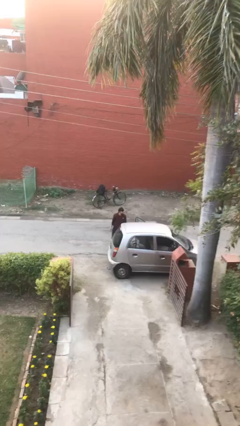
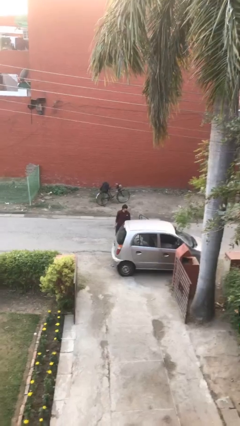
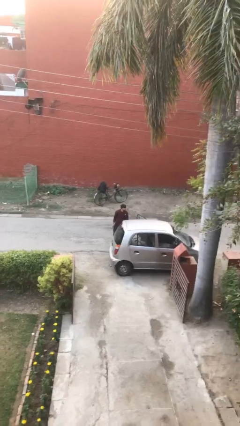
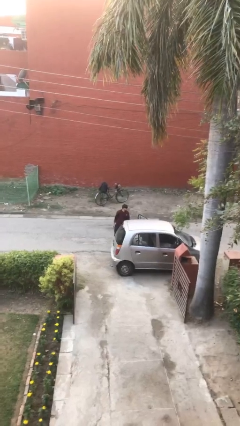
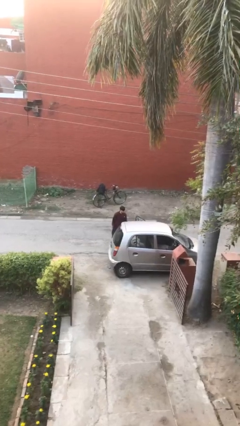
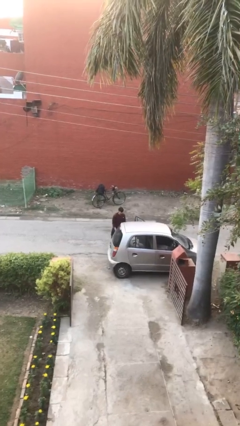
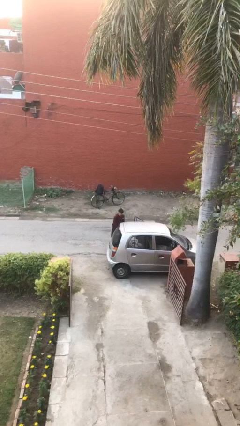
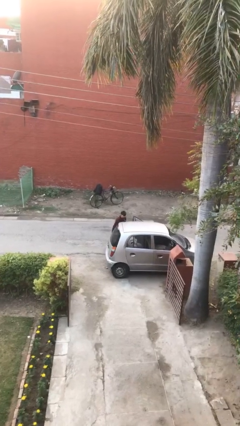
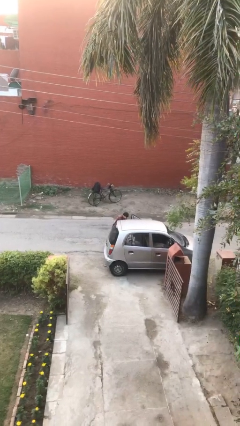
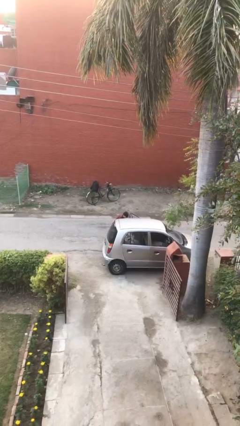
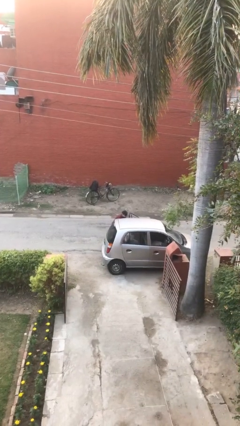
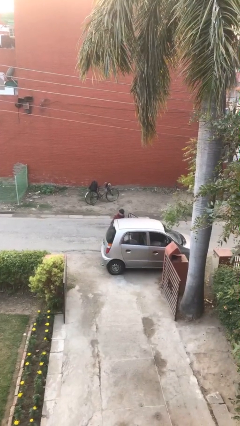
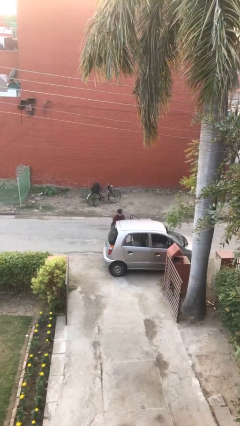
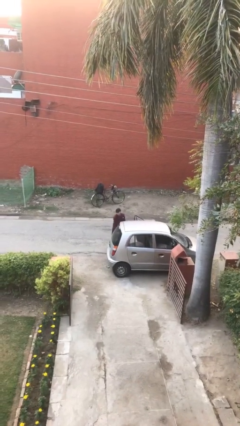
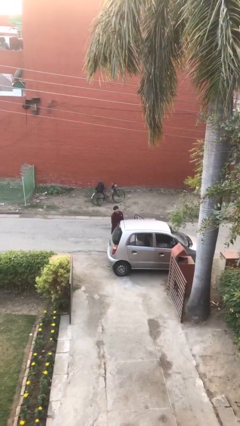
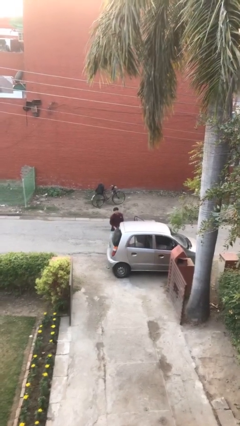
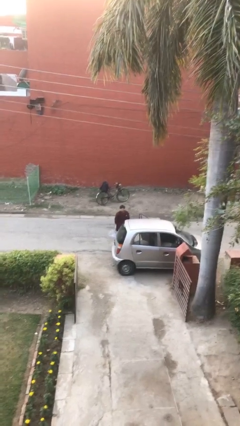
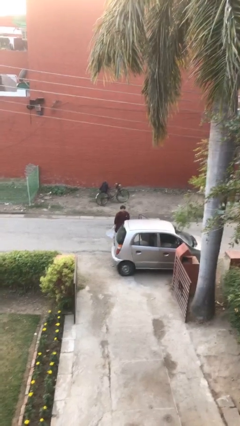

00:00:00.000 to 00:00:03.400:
person unloads car

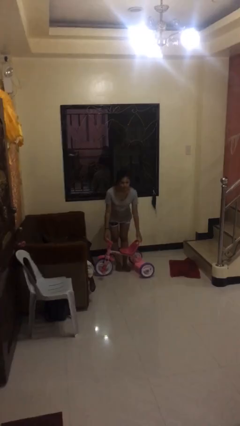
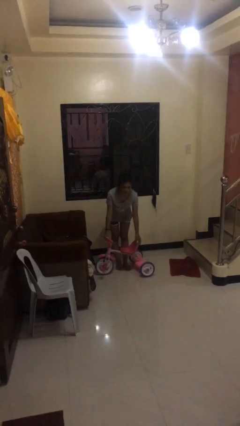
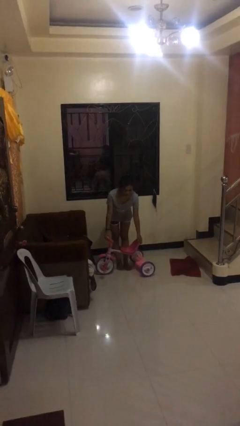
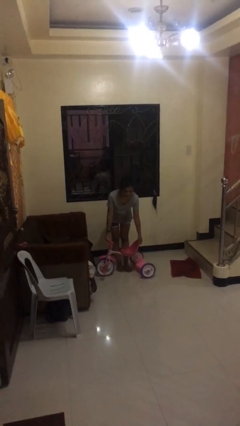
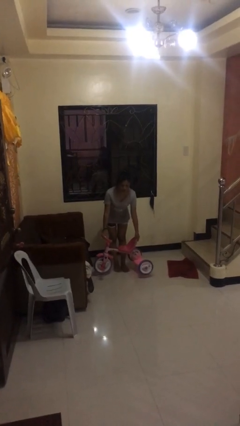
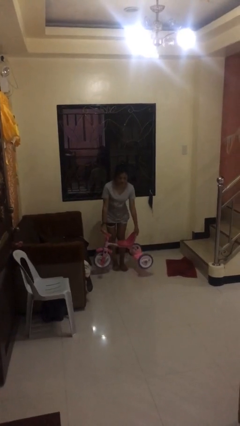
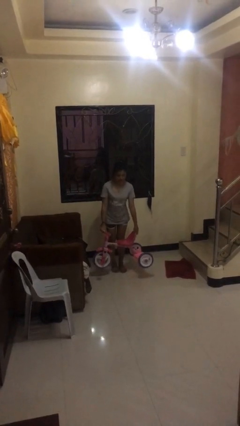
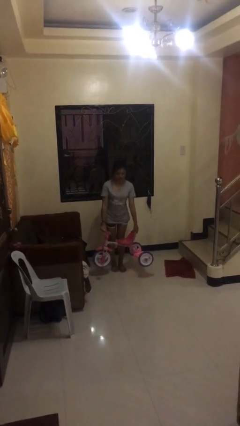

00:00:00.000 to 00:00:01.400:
person picks up object from floor

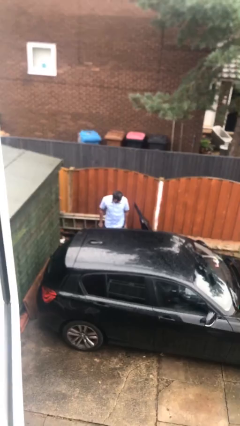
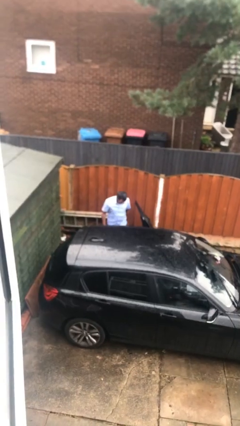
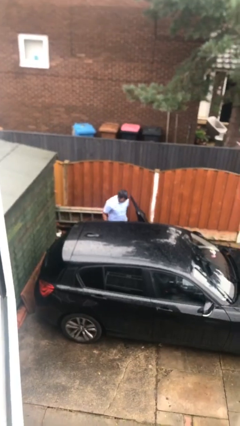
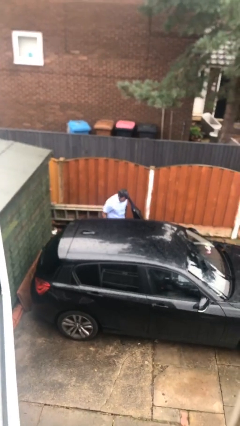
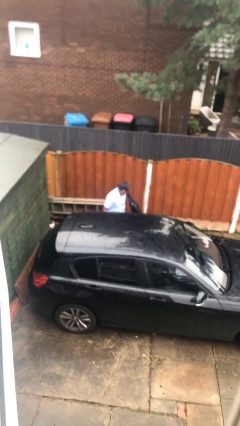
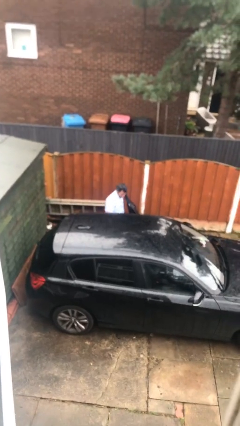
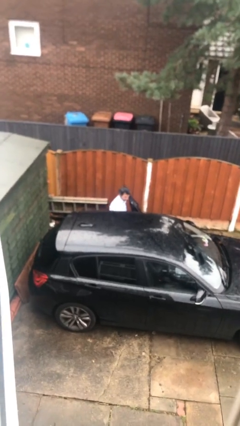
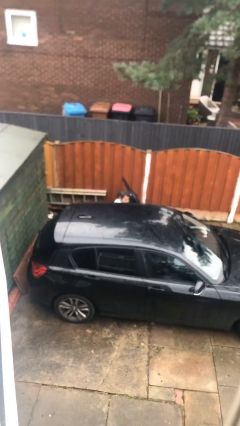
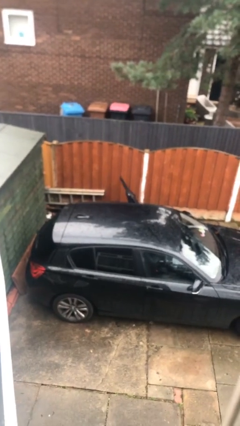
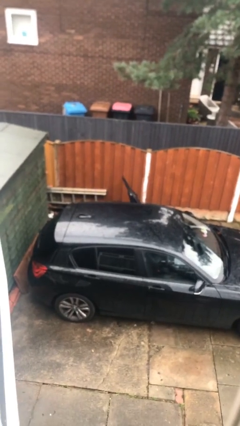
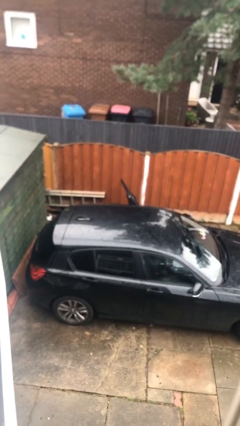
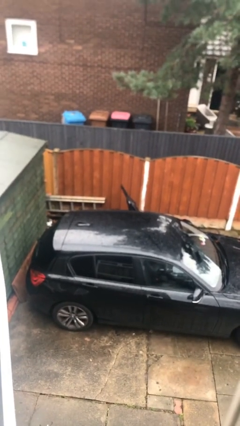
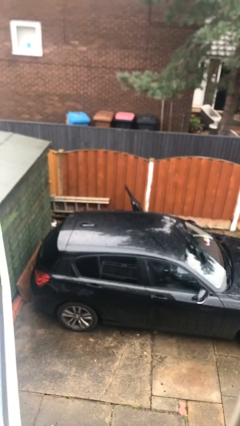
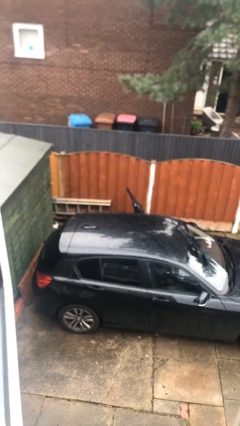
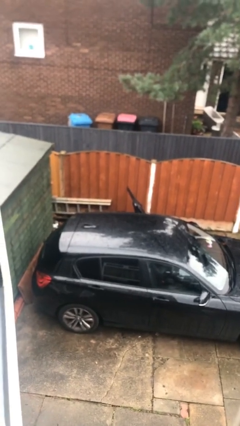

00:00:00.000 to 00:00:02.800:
person enters car

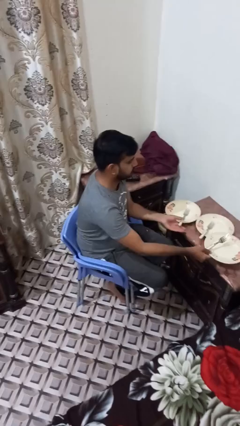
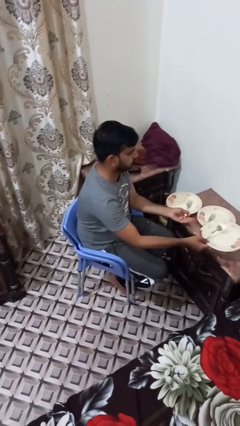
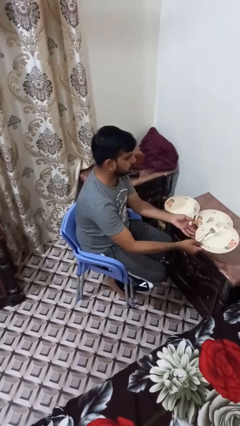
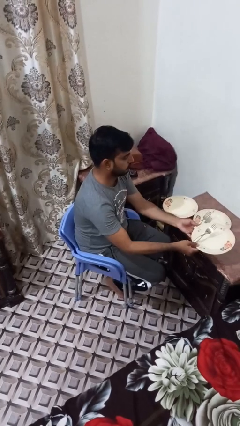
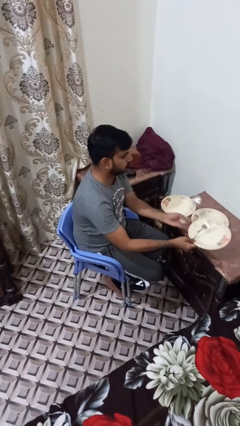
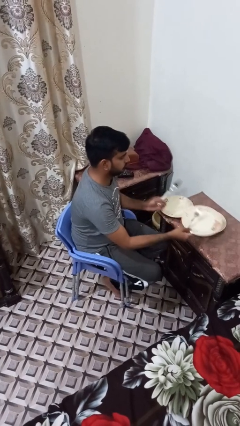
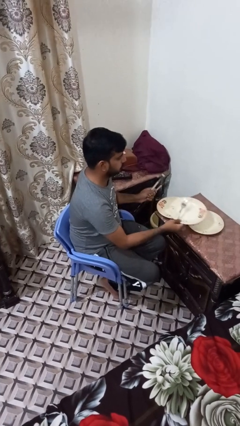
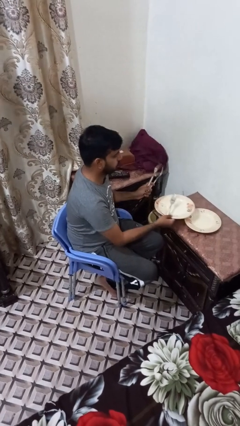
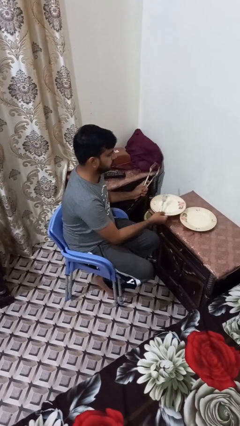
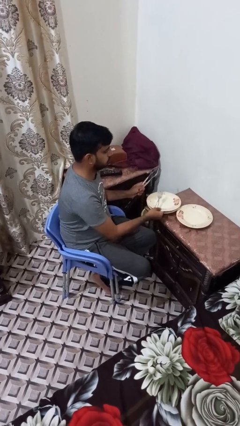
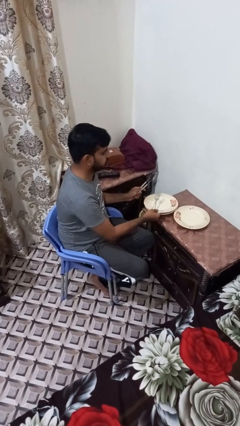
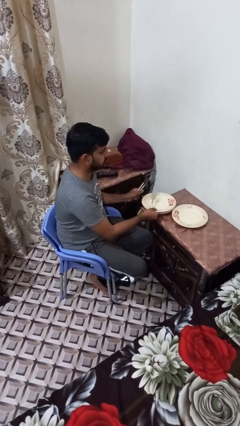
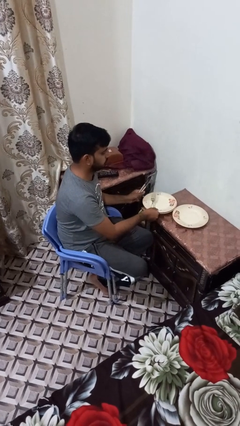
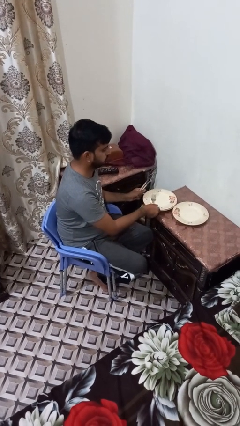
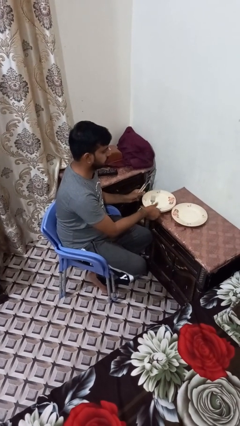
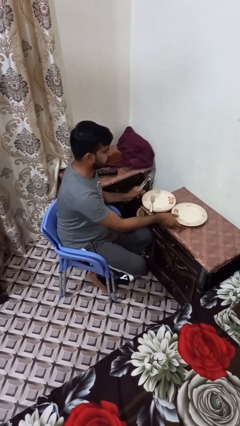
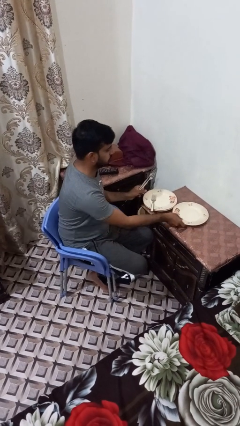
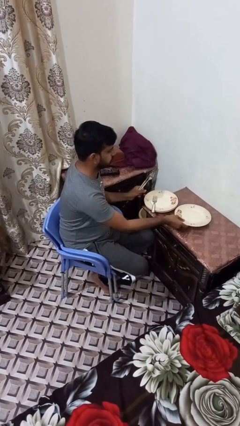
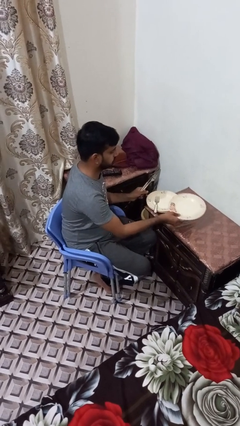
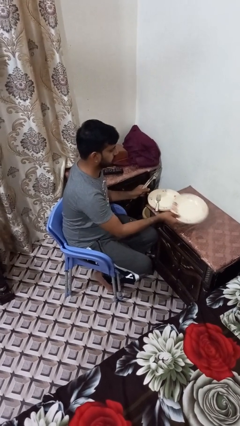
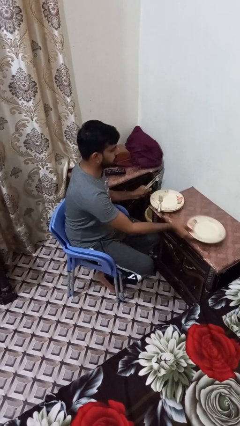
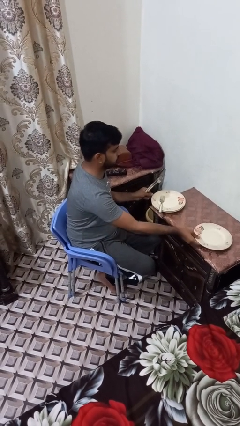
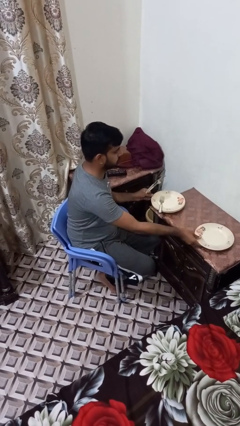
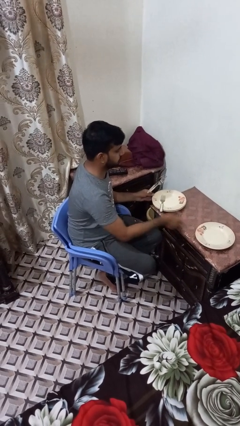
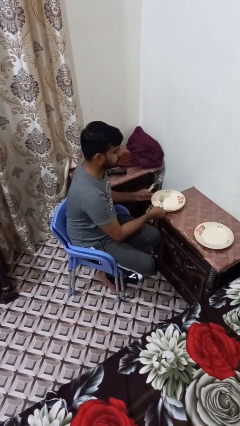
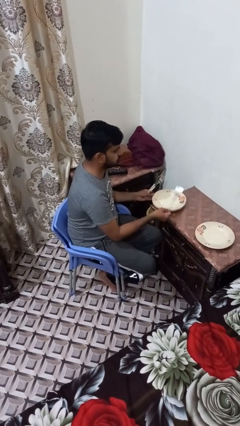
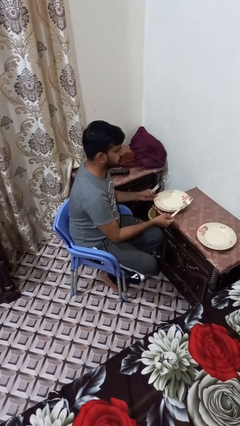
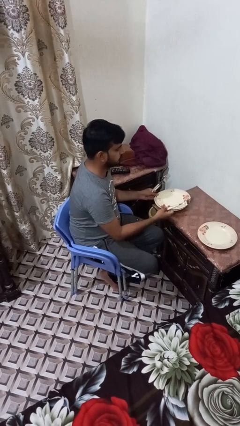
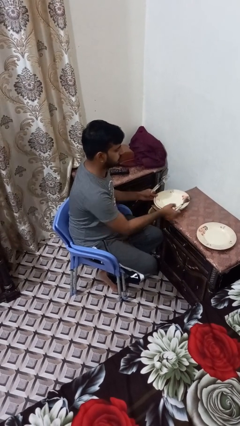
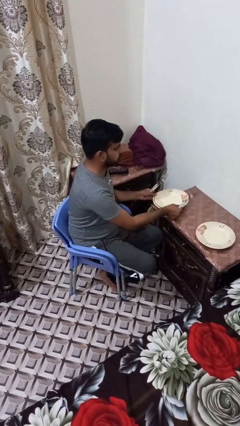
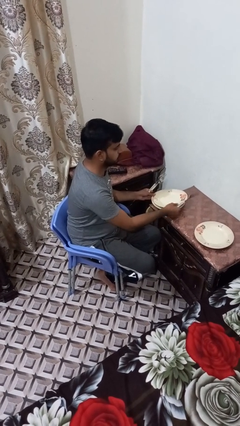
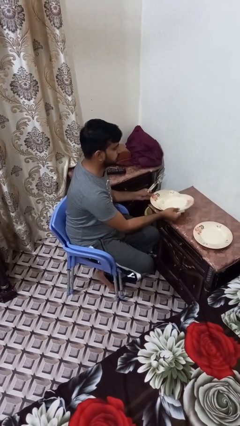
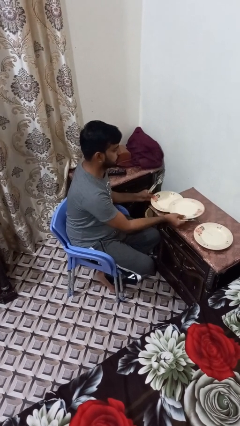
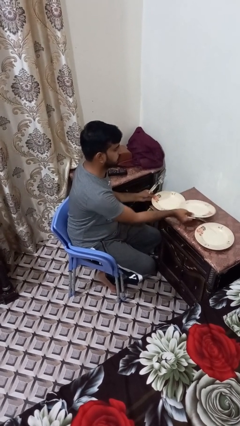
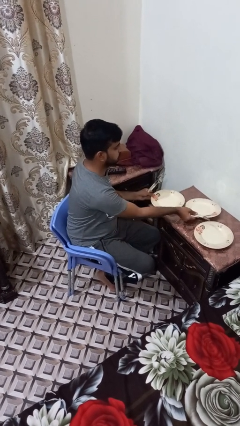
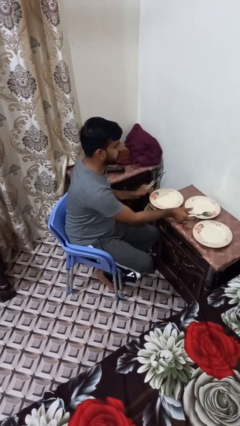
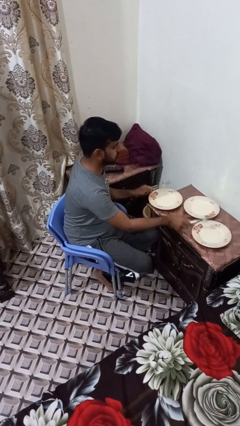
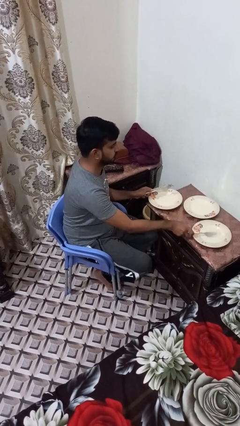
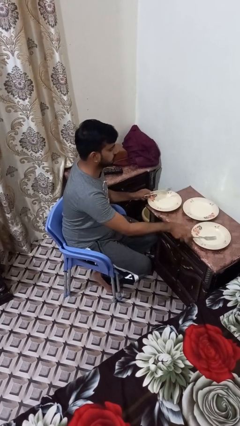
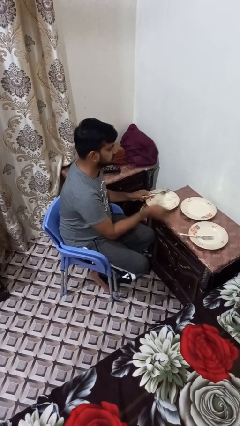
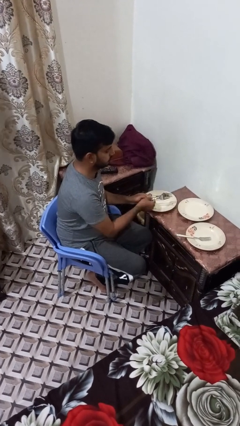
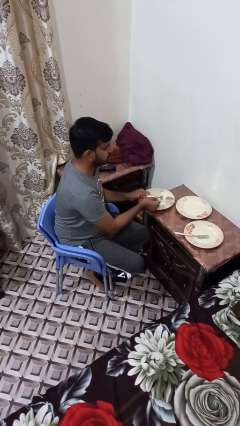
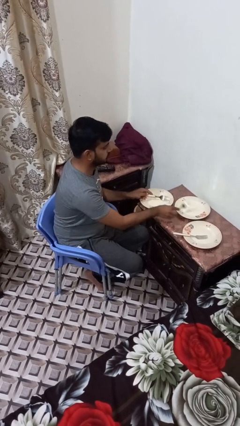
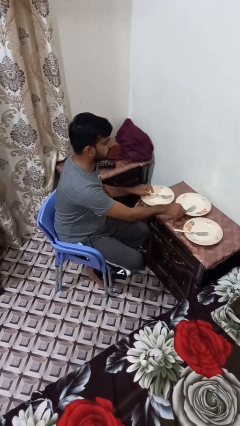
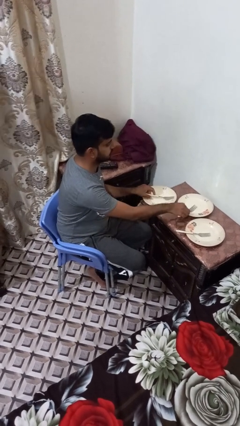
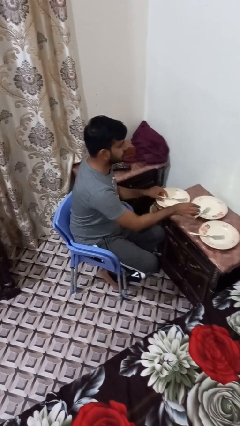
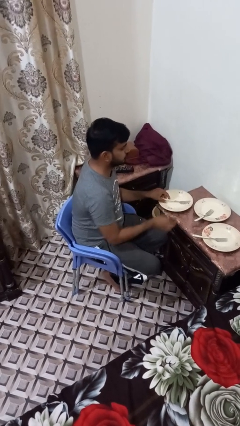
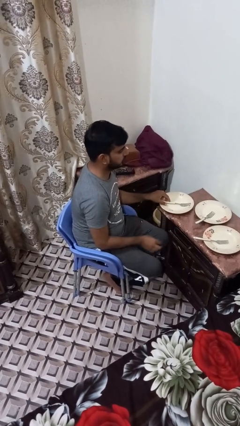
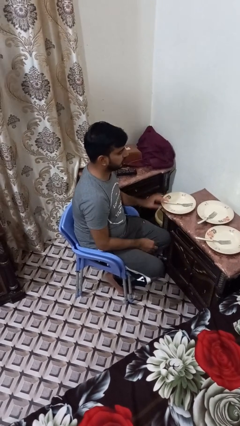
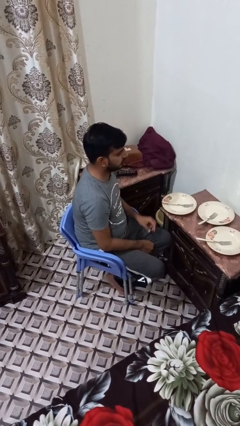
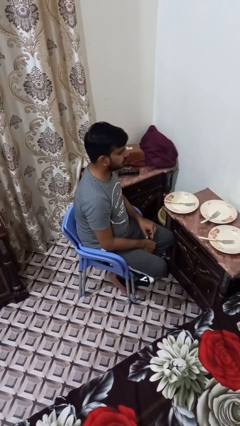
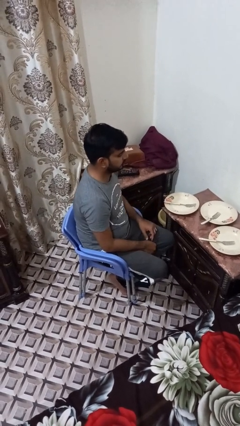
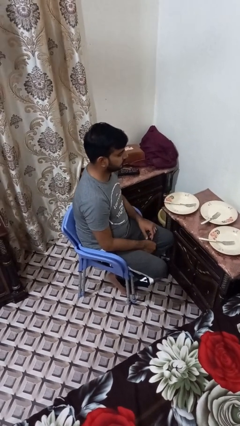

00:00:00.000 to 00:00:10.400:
person sets table

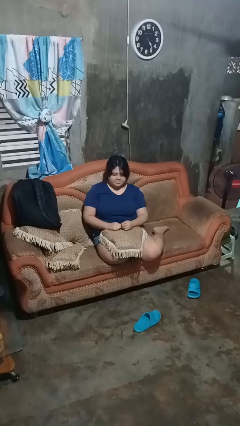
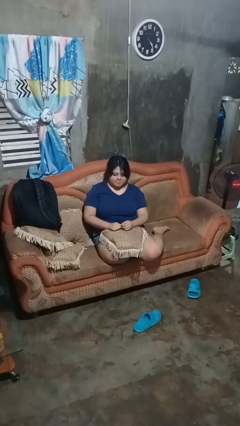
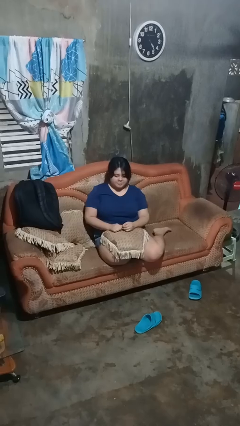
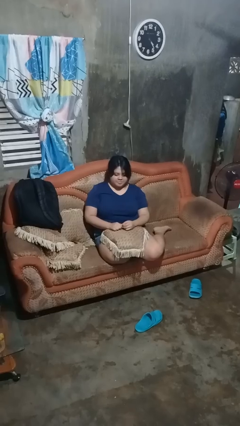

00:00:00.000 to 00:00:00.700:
person strokes chin
